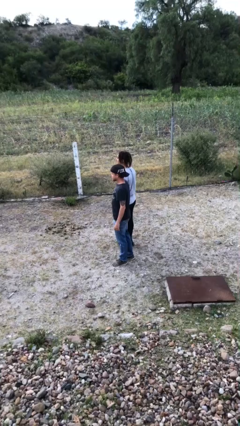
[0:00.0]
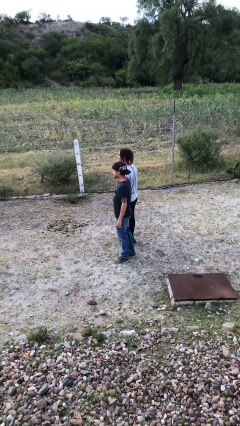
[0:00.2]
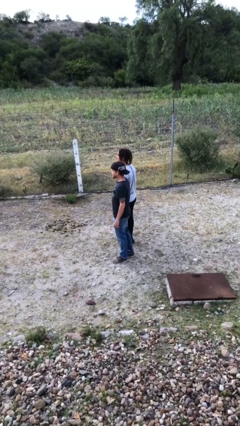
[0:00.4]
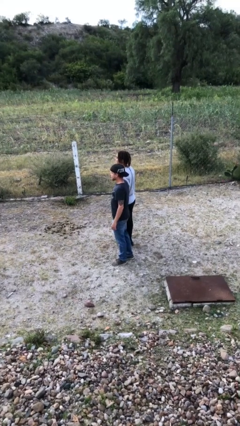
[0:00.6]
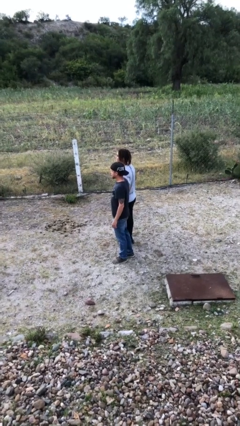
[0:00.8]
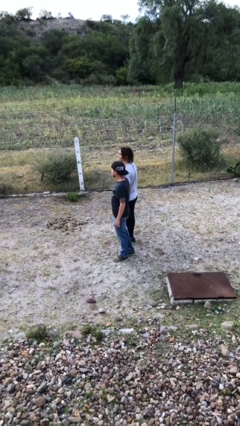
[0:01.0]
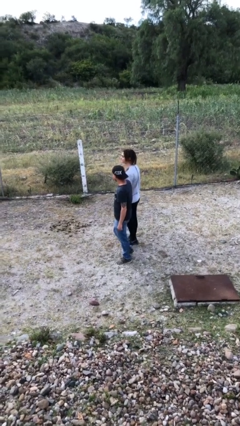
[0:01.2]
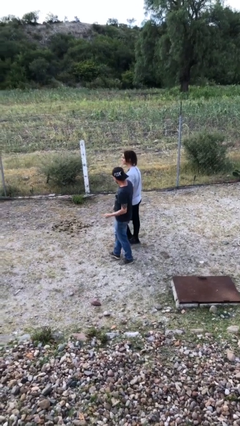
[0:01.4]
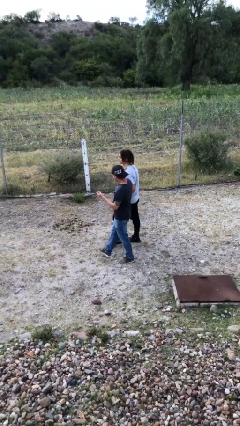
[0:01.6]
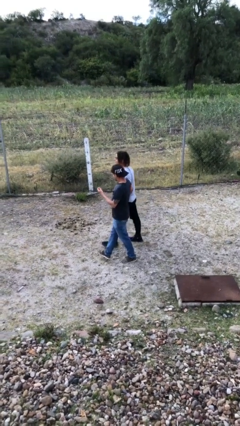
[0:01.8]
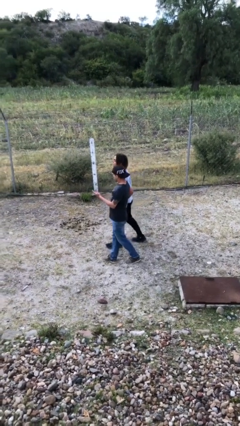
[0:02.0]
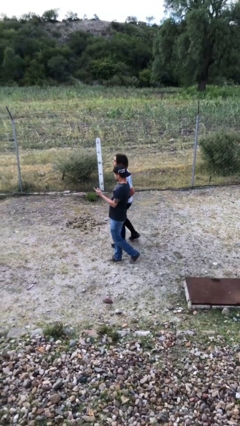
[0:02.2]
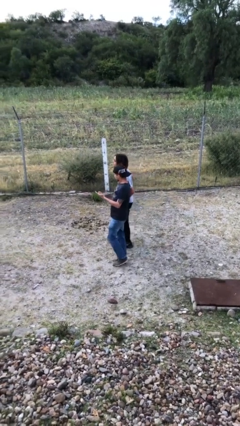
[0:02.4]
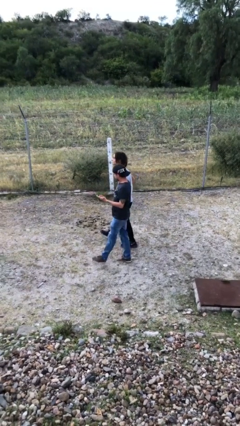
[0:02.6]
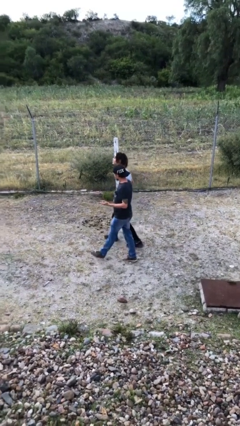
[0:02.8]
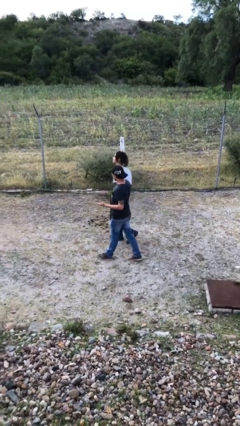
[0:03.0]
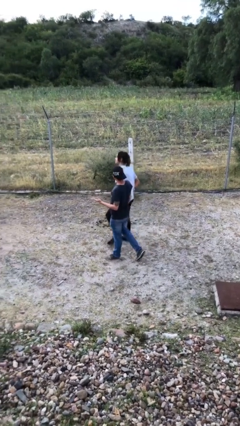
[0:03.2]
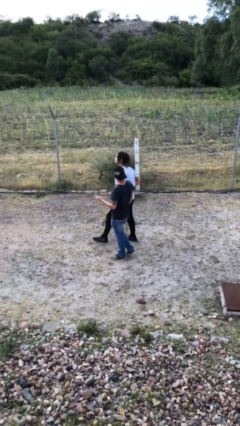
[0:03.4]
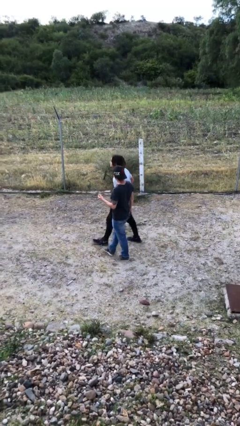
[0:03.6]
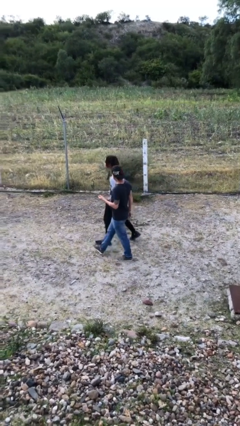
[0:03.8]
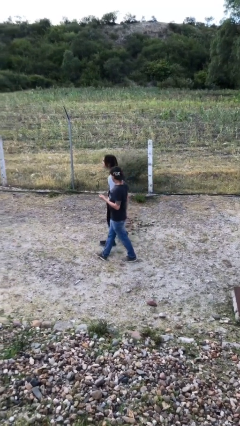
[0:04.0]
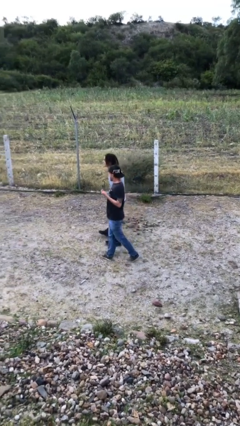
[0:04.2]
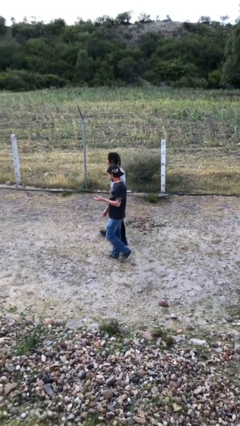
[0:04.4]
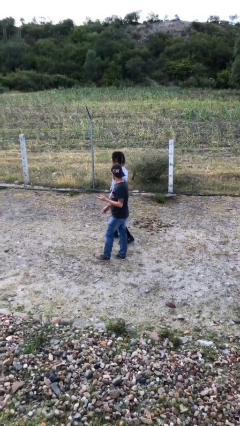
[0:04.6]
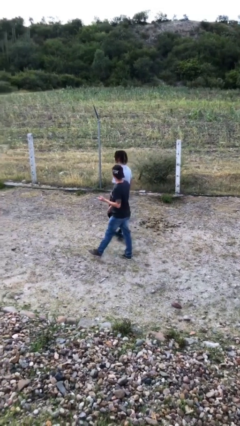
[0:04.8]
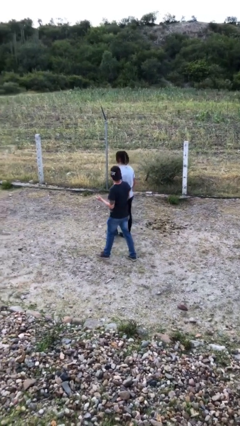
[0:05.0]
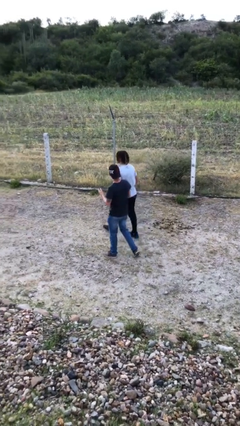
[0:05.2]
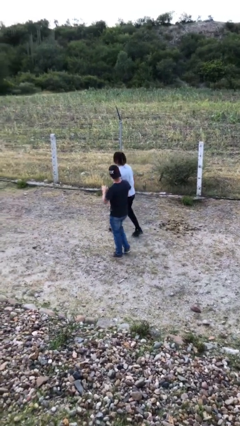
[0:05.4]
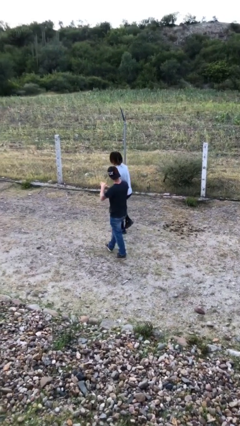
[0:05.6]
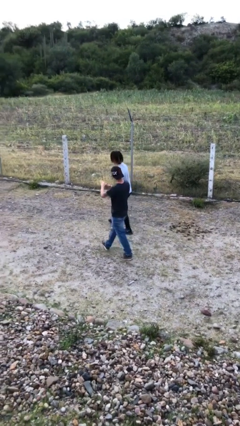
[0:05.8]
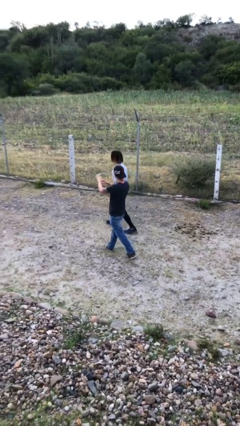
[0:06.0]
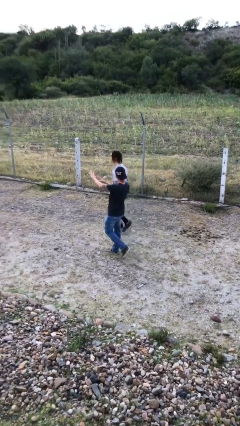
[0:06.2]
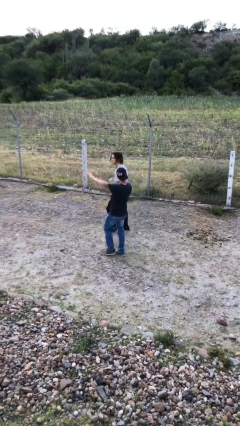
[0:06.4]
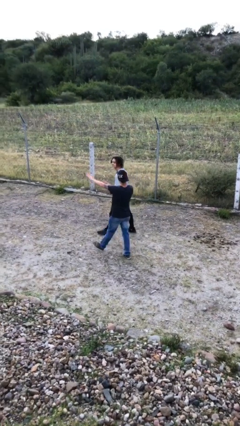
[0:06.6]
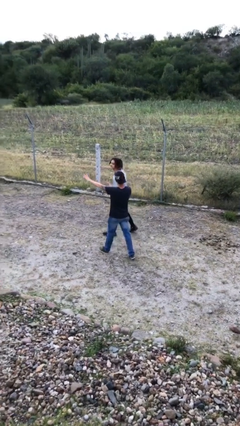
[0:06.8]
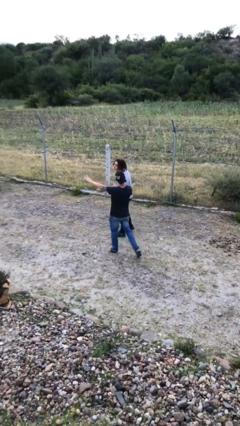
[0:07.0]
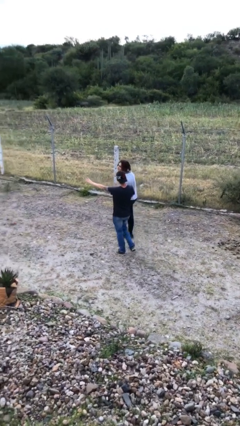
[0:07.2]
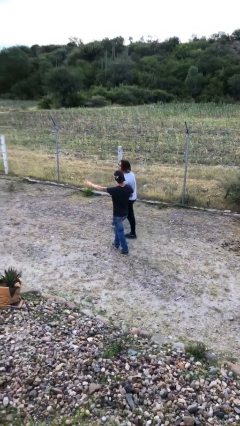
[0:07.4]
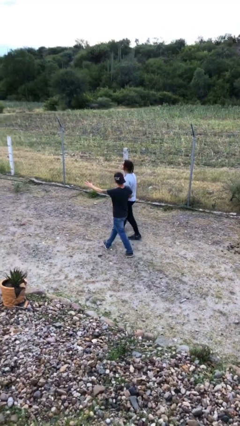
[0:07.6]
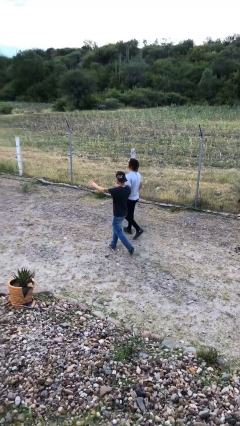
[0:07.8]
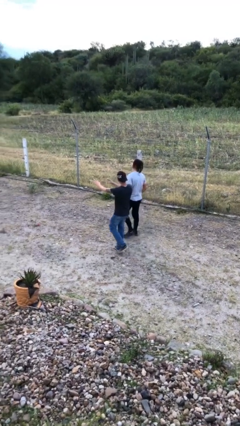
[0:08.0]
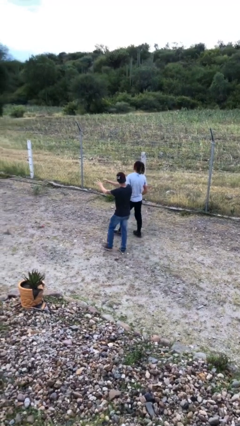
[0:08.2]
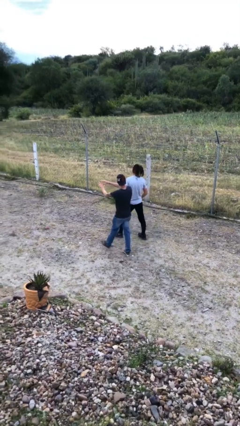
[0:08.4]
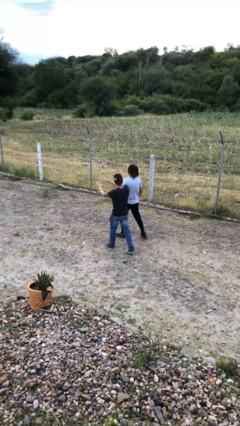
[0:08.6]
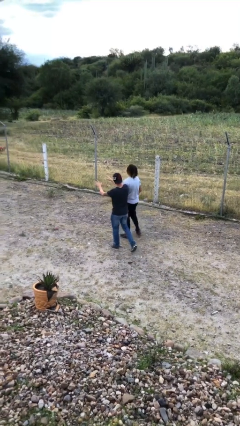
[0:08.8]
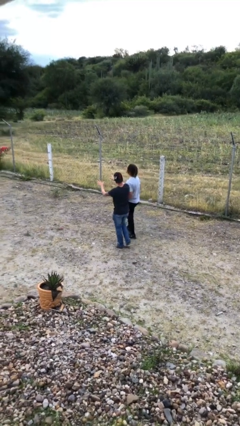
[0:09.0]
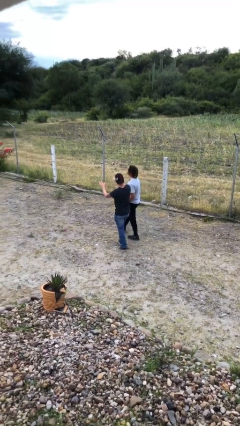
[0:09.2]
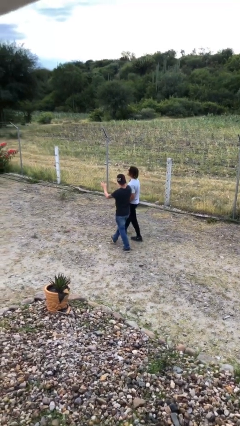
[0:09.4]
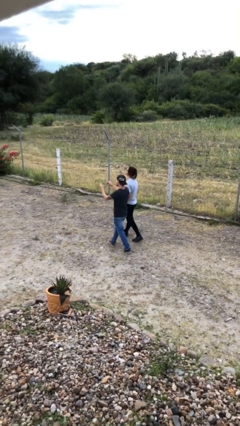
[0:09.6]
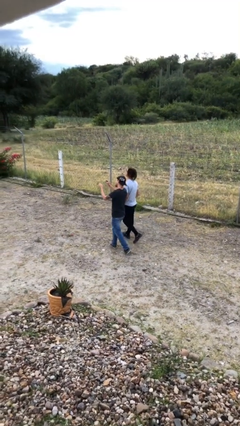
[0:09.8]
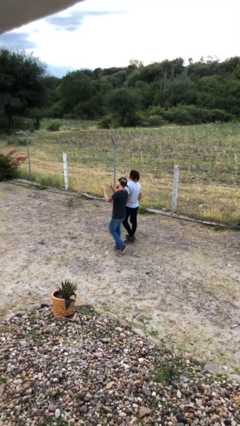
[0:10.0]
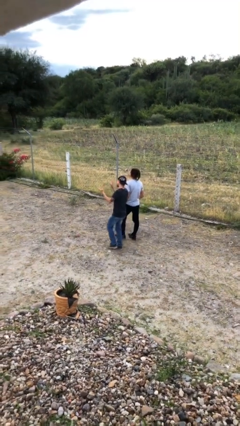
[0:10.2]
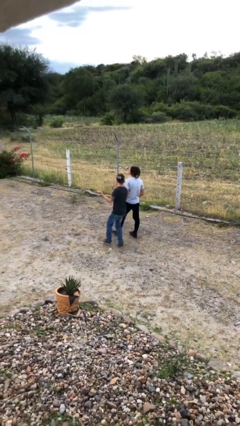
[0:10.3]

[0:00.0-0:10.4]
person talks to person

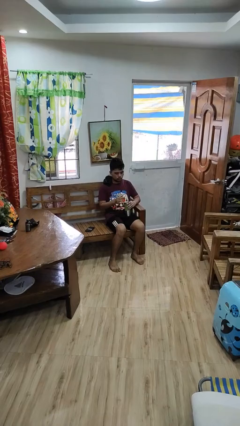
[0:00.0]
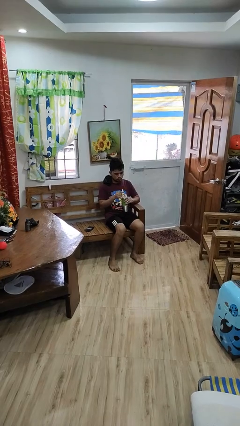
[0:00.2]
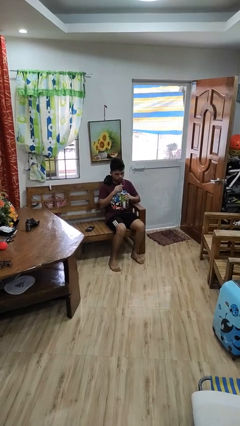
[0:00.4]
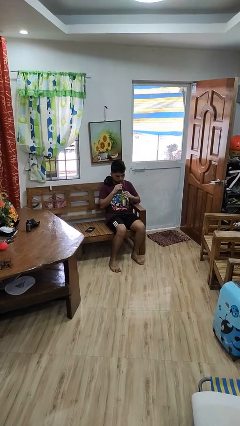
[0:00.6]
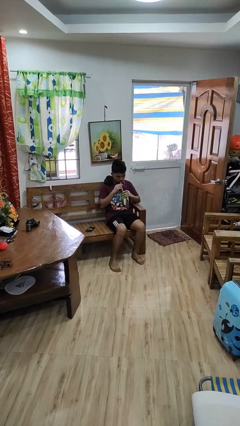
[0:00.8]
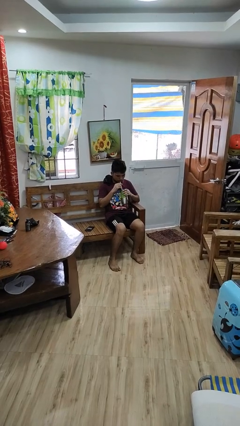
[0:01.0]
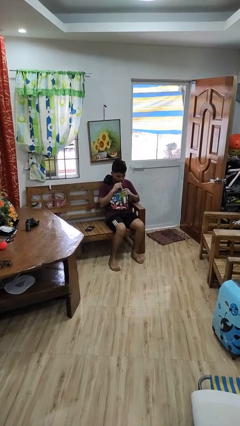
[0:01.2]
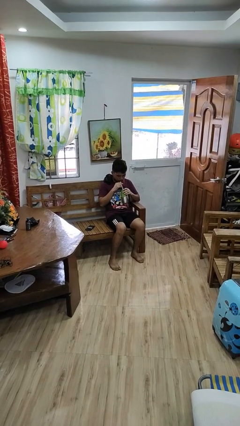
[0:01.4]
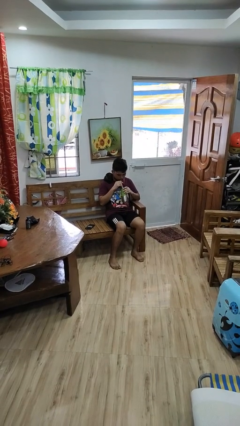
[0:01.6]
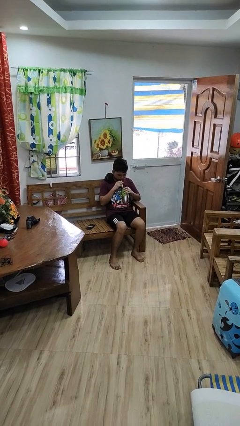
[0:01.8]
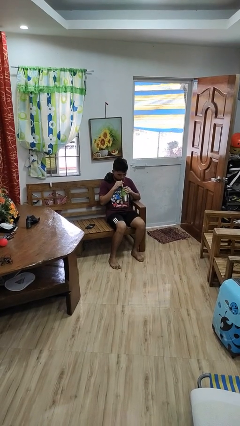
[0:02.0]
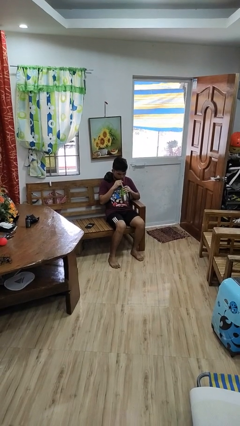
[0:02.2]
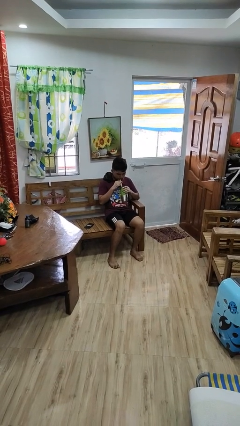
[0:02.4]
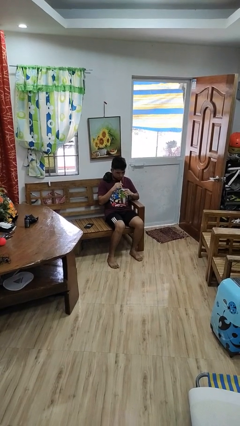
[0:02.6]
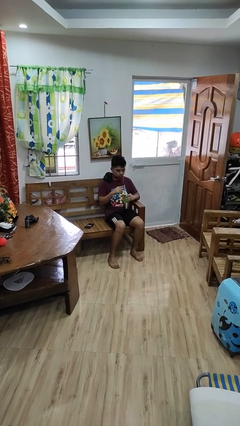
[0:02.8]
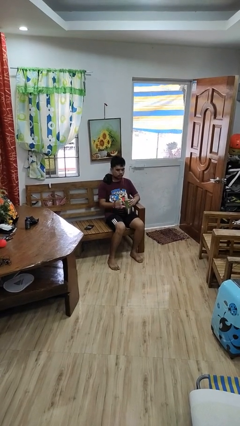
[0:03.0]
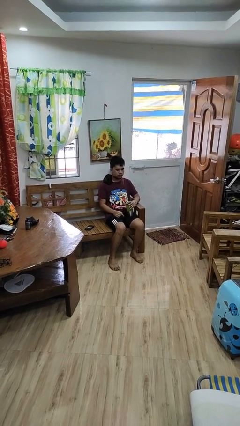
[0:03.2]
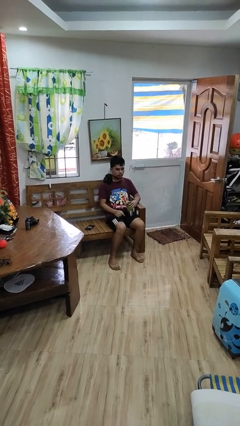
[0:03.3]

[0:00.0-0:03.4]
person drinks from straw

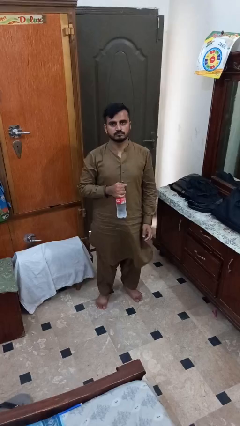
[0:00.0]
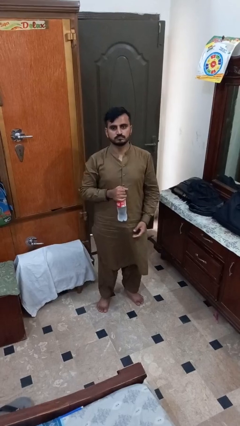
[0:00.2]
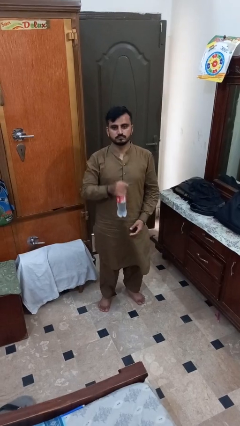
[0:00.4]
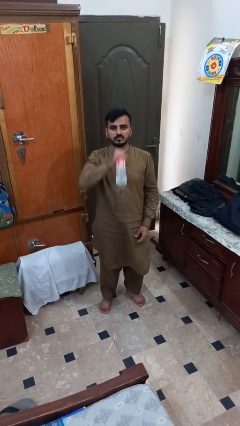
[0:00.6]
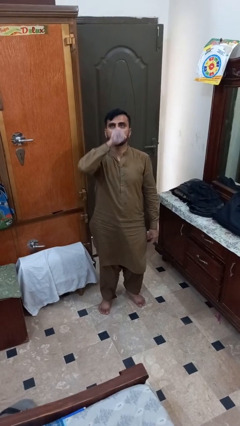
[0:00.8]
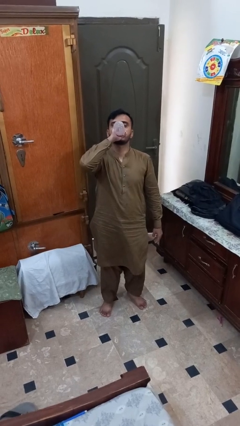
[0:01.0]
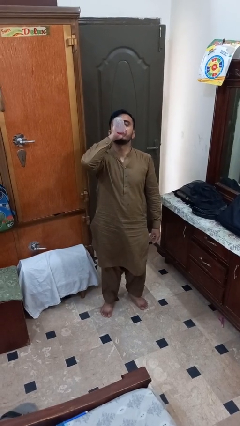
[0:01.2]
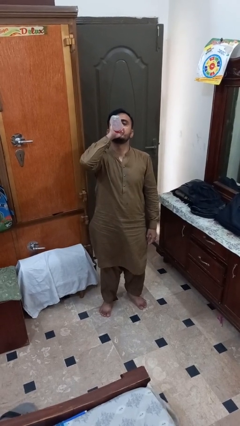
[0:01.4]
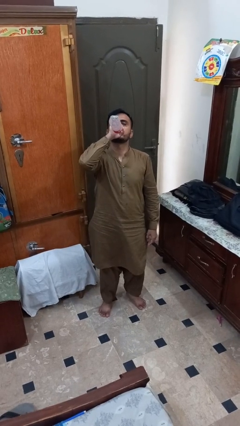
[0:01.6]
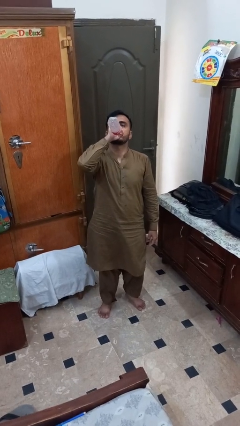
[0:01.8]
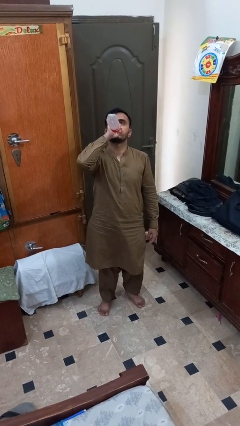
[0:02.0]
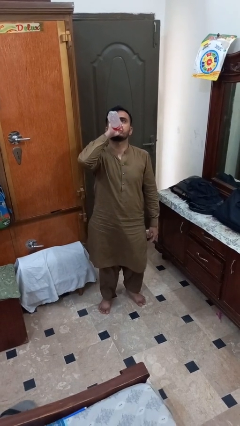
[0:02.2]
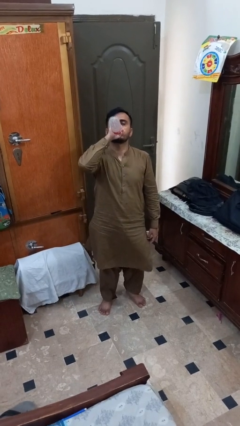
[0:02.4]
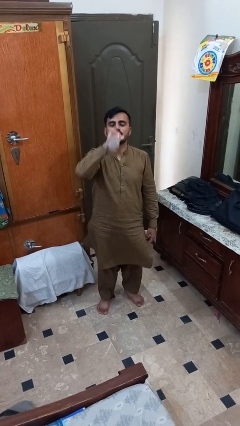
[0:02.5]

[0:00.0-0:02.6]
person drinks from bottle

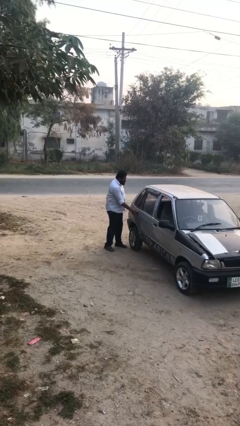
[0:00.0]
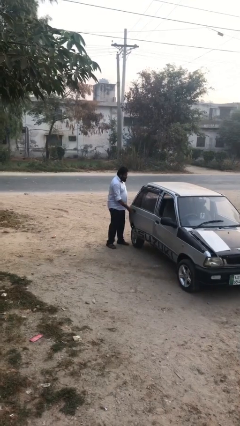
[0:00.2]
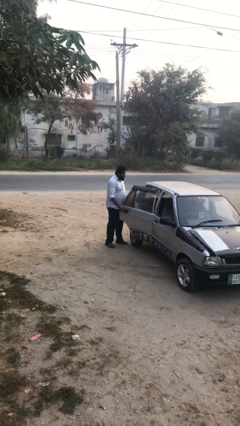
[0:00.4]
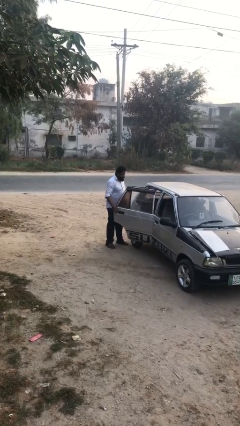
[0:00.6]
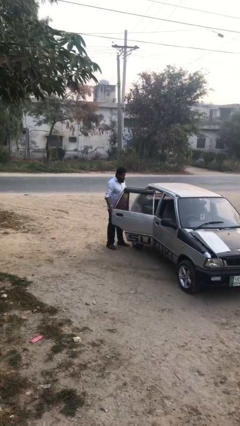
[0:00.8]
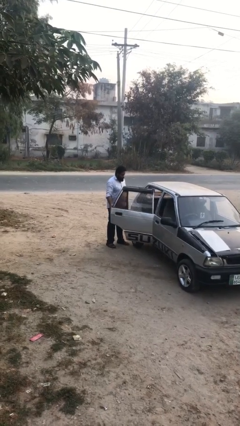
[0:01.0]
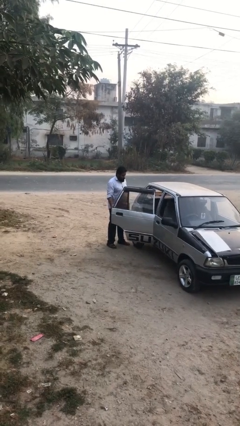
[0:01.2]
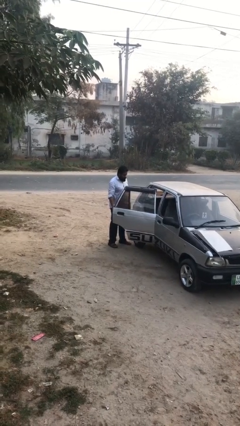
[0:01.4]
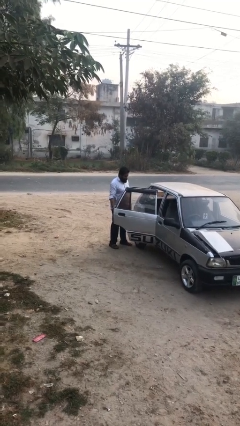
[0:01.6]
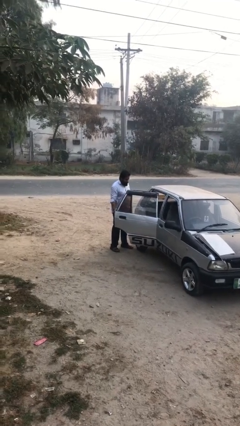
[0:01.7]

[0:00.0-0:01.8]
person opens car door
